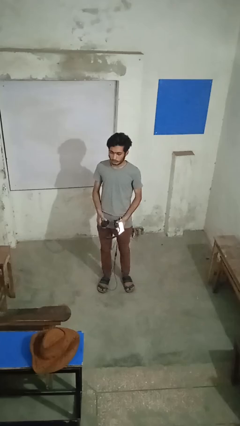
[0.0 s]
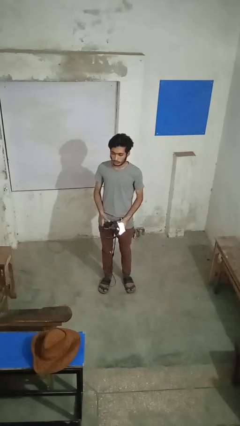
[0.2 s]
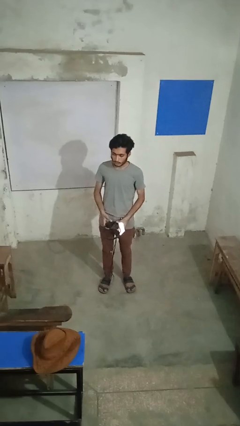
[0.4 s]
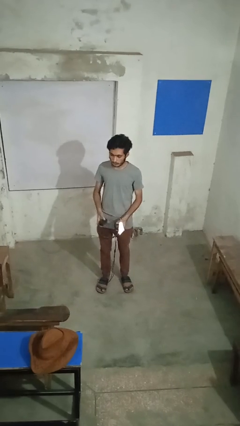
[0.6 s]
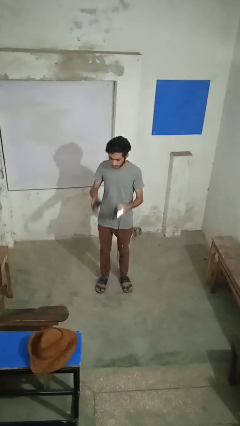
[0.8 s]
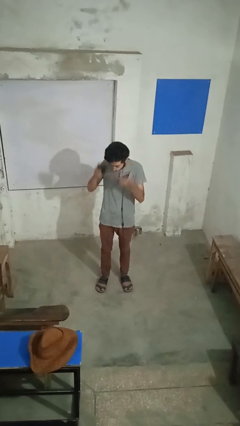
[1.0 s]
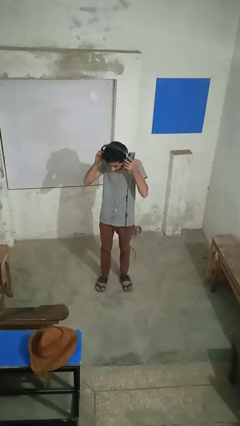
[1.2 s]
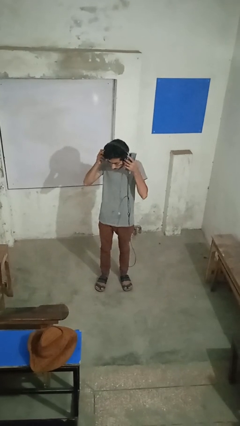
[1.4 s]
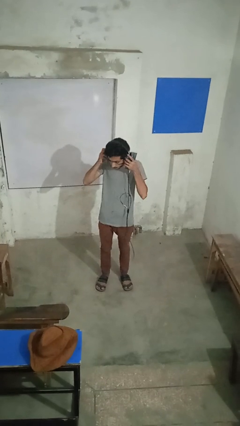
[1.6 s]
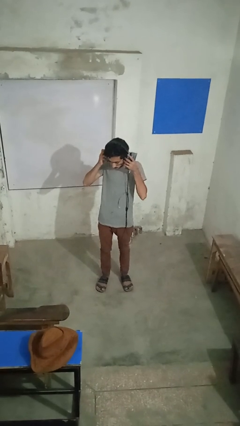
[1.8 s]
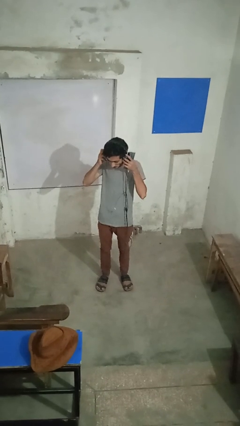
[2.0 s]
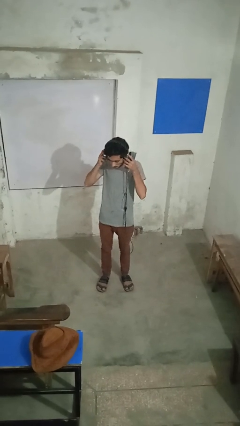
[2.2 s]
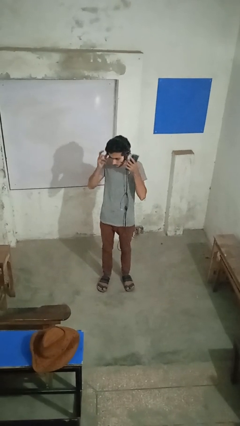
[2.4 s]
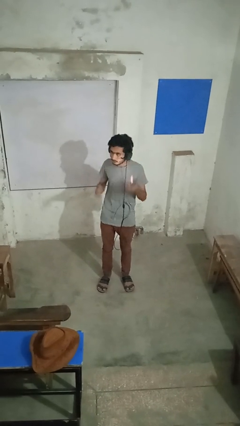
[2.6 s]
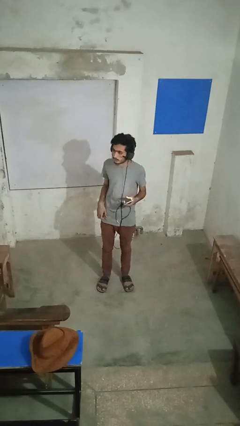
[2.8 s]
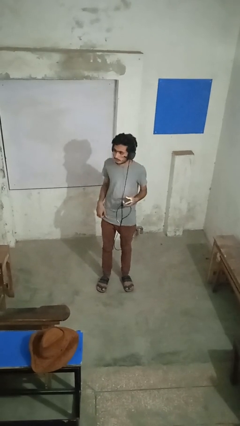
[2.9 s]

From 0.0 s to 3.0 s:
person puts on headphones

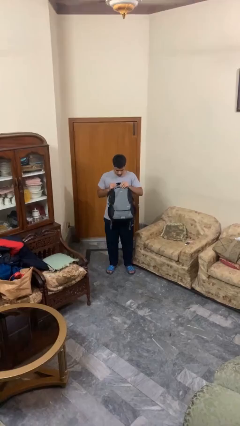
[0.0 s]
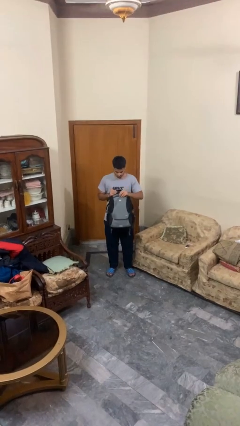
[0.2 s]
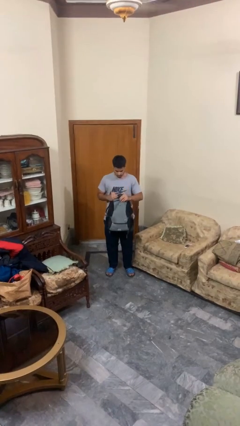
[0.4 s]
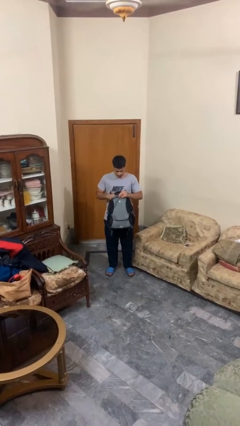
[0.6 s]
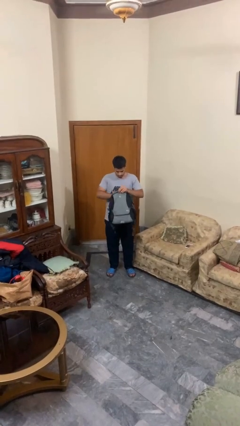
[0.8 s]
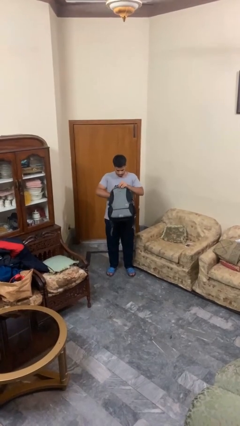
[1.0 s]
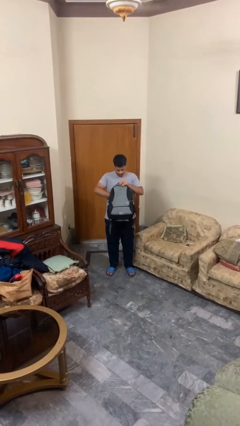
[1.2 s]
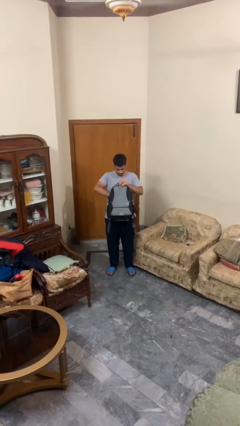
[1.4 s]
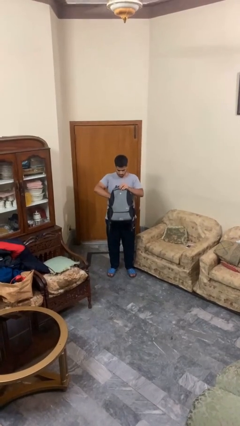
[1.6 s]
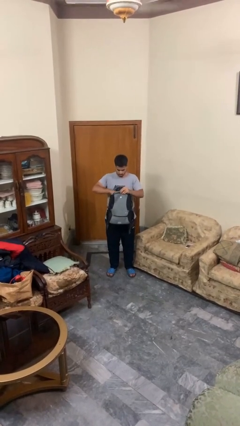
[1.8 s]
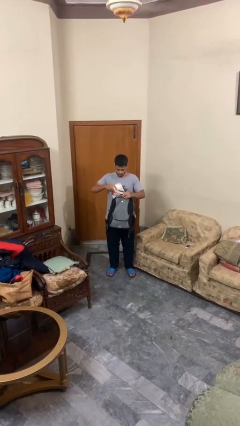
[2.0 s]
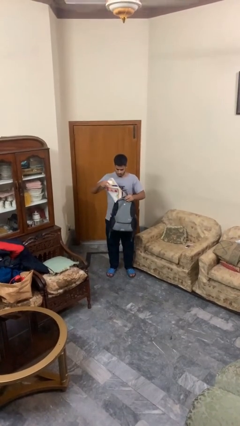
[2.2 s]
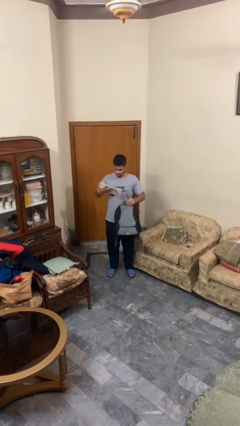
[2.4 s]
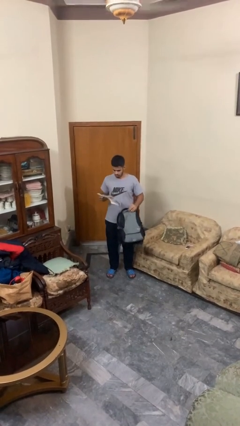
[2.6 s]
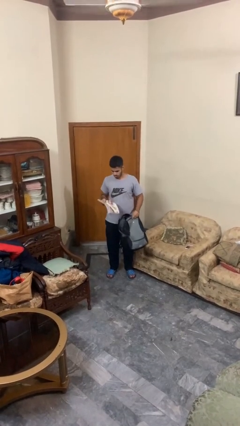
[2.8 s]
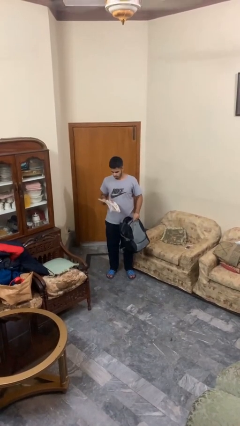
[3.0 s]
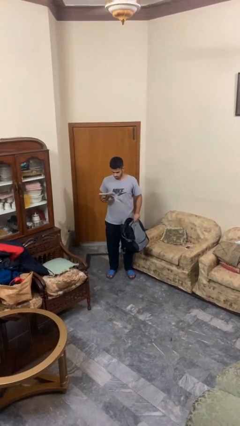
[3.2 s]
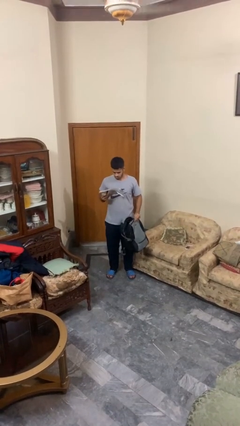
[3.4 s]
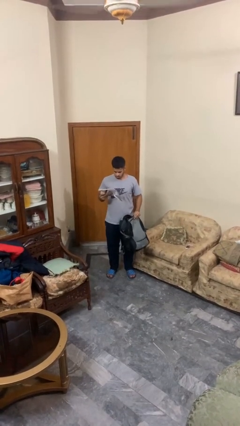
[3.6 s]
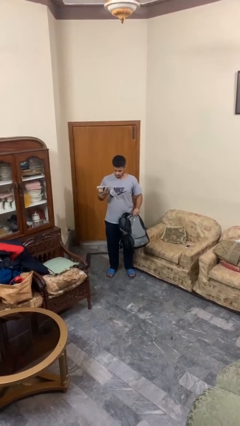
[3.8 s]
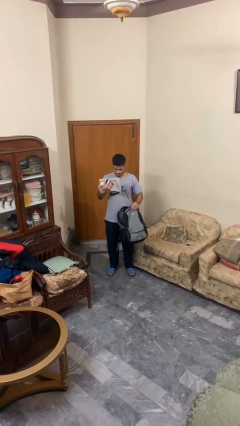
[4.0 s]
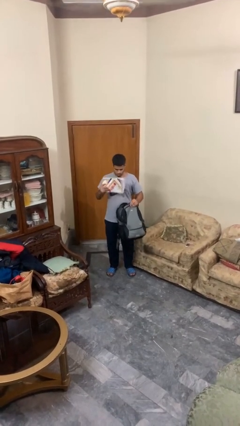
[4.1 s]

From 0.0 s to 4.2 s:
person takes object from backpack

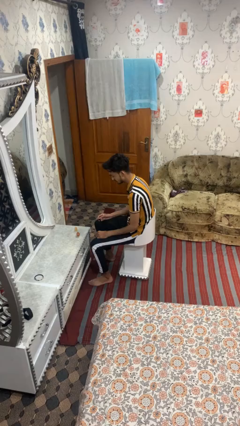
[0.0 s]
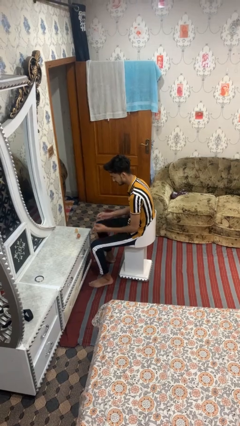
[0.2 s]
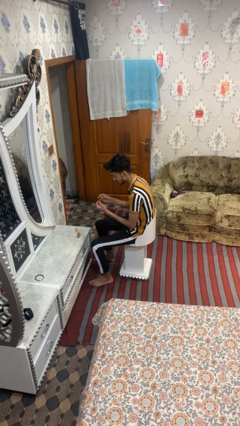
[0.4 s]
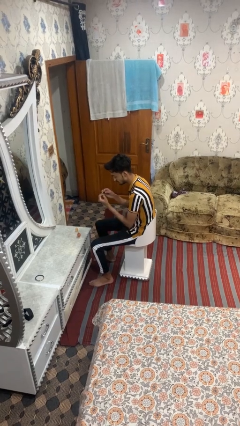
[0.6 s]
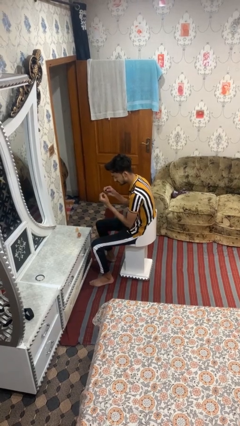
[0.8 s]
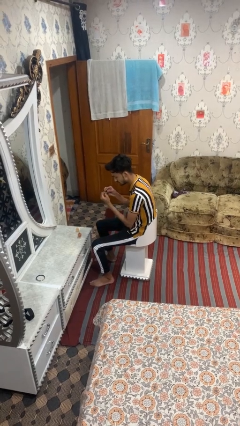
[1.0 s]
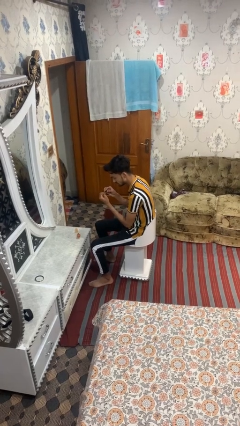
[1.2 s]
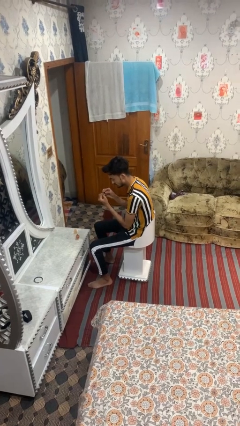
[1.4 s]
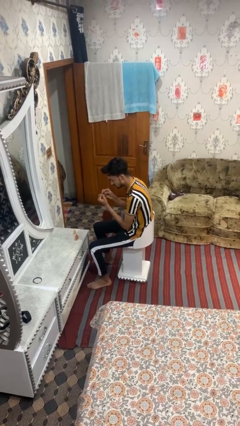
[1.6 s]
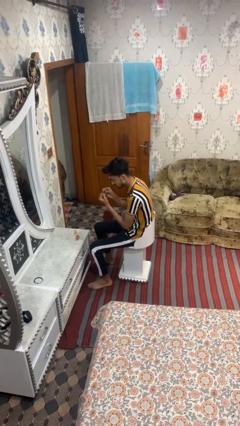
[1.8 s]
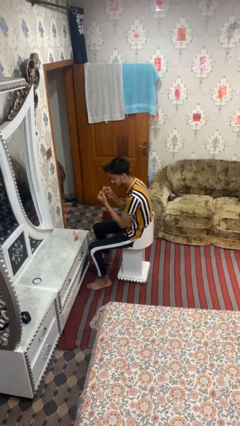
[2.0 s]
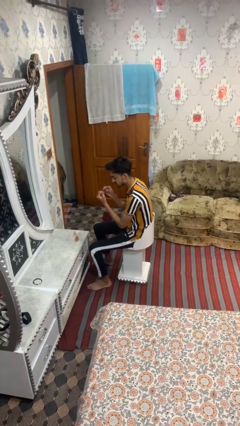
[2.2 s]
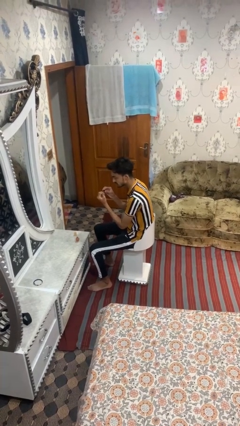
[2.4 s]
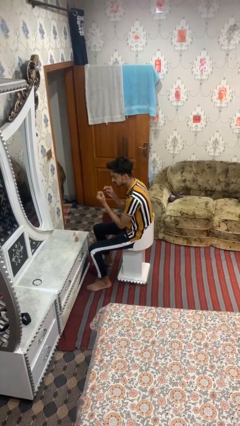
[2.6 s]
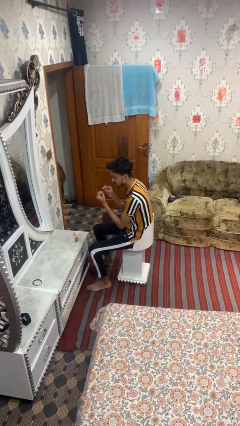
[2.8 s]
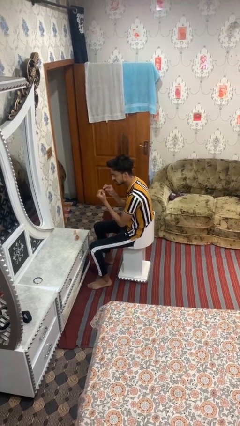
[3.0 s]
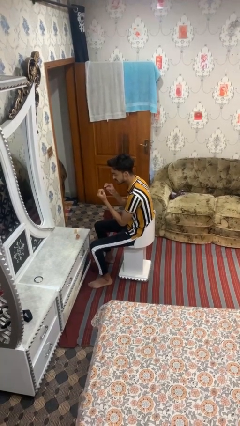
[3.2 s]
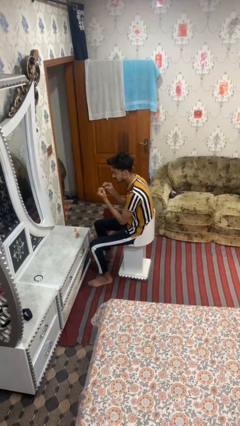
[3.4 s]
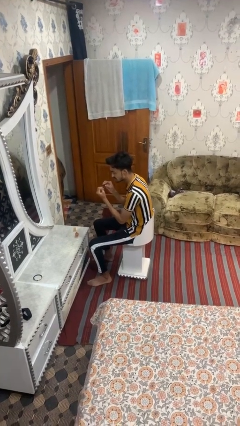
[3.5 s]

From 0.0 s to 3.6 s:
person paints fingernails

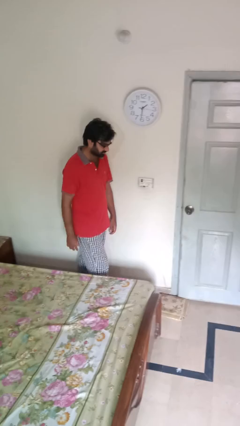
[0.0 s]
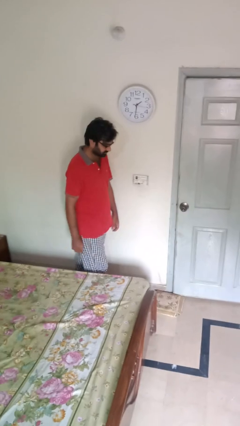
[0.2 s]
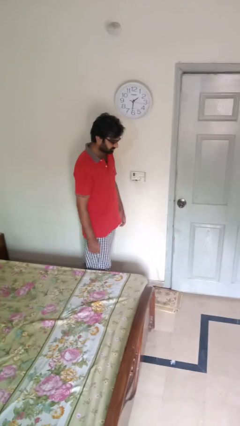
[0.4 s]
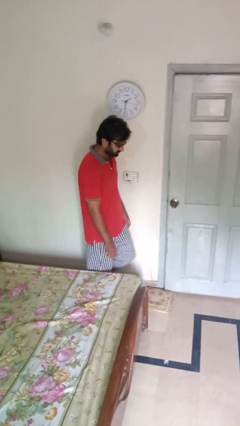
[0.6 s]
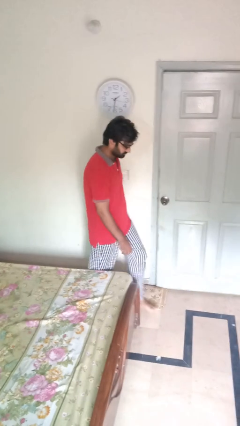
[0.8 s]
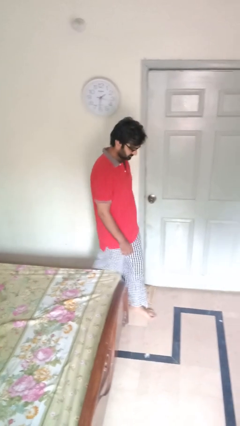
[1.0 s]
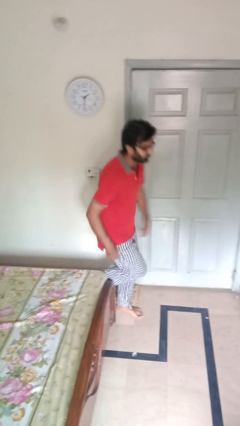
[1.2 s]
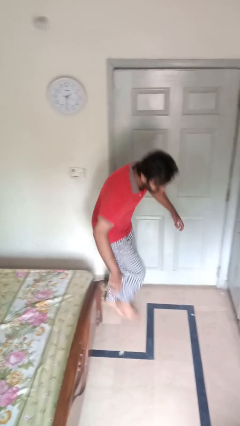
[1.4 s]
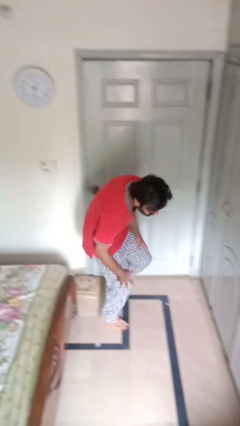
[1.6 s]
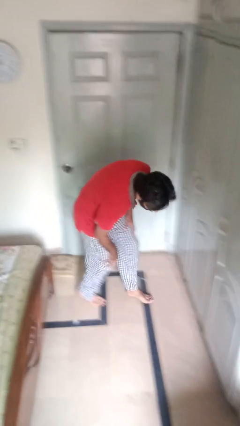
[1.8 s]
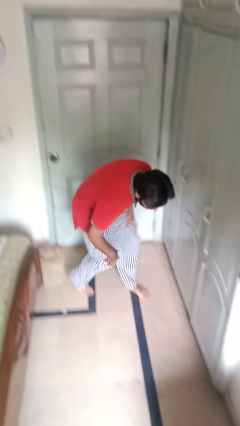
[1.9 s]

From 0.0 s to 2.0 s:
person trips on object on floor

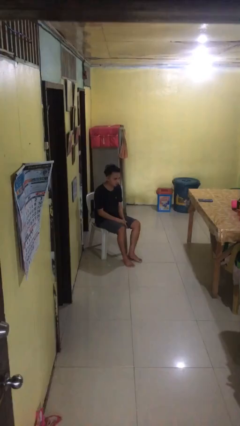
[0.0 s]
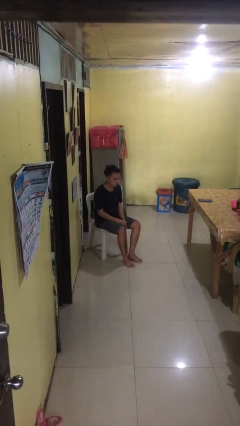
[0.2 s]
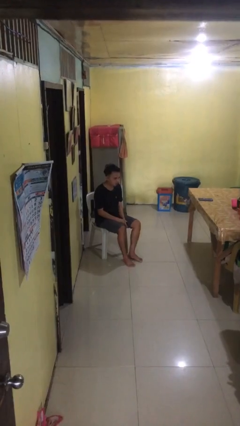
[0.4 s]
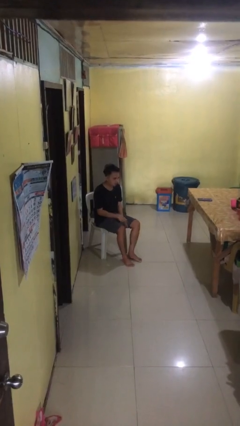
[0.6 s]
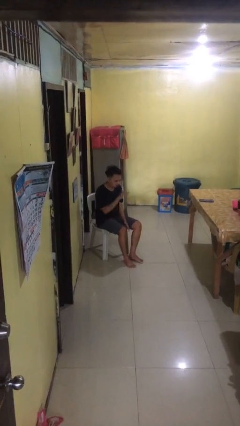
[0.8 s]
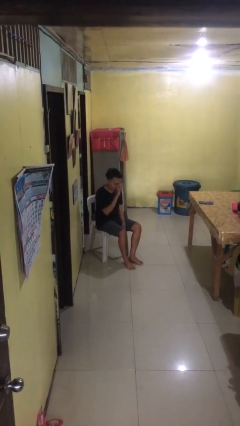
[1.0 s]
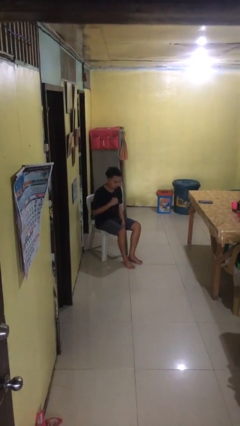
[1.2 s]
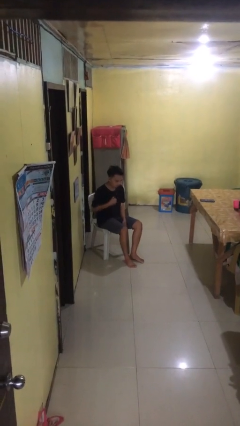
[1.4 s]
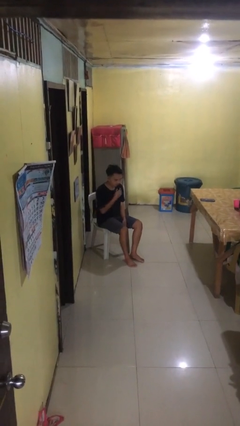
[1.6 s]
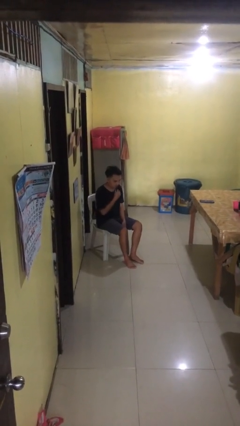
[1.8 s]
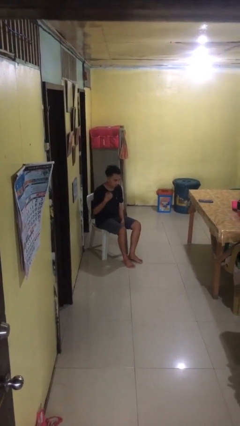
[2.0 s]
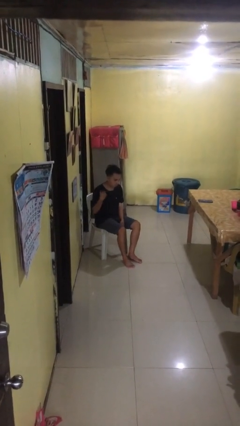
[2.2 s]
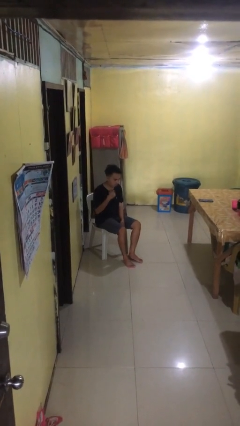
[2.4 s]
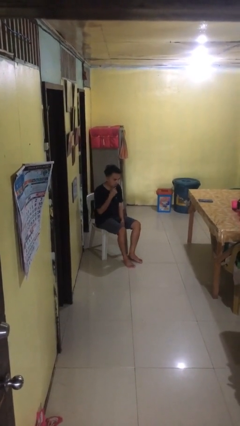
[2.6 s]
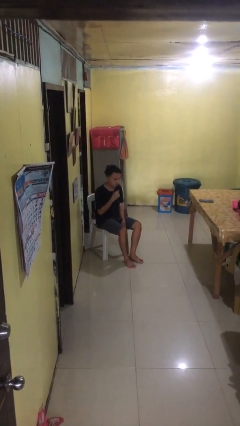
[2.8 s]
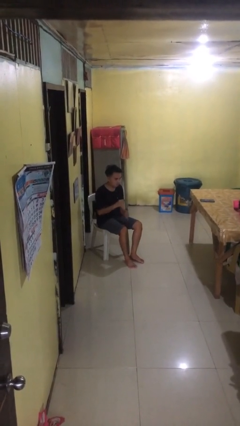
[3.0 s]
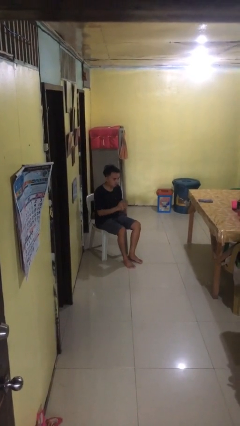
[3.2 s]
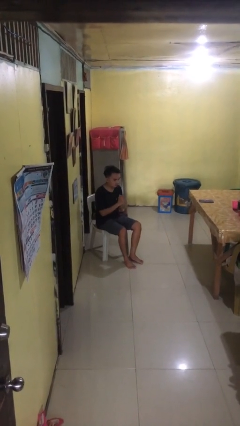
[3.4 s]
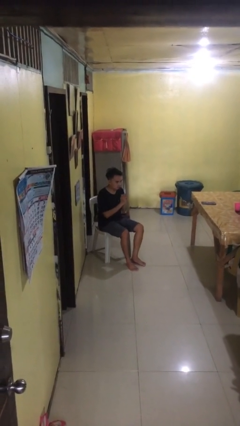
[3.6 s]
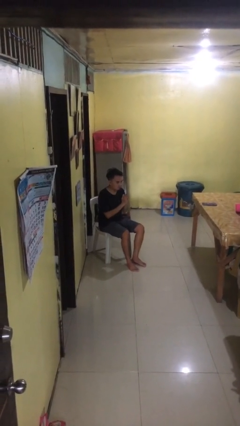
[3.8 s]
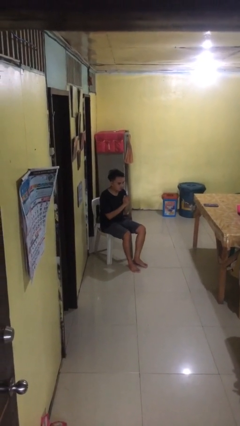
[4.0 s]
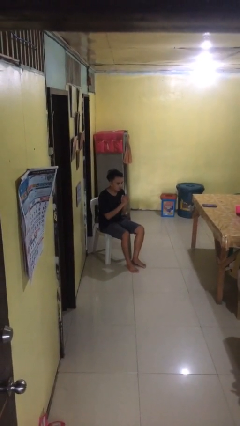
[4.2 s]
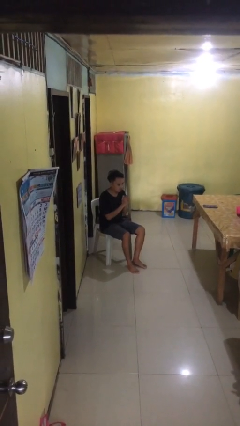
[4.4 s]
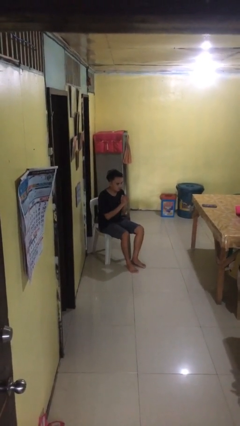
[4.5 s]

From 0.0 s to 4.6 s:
person prays
